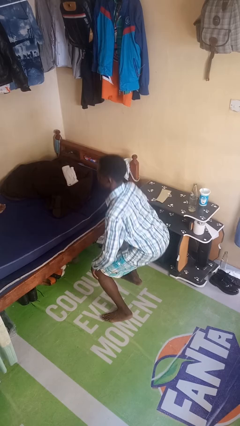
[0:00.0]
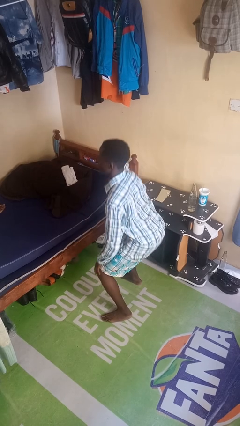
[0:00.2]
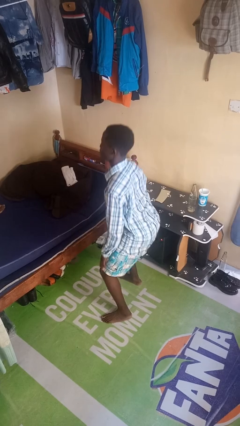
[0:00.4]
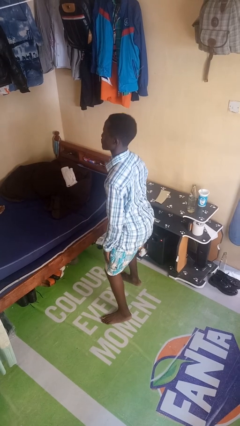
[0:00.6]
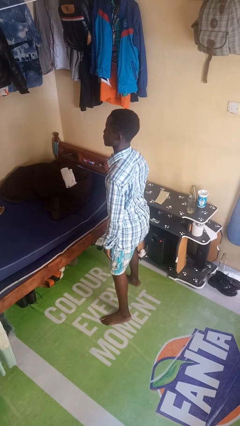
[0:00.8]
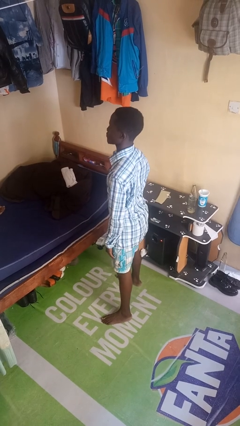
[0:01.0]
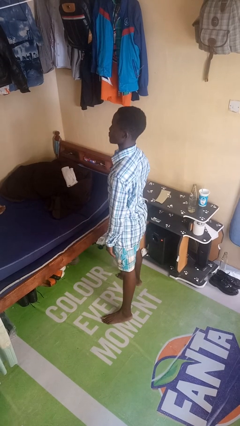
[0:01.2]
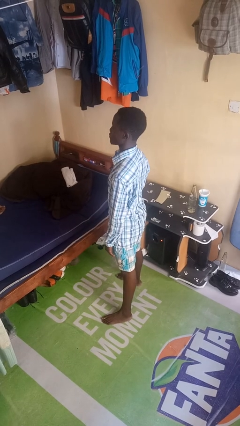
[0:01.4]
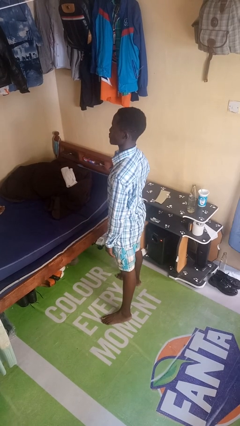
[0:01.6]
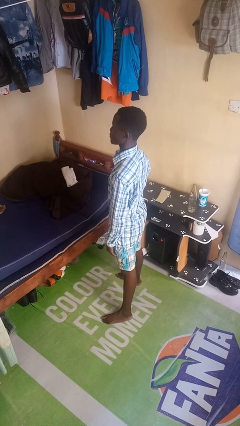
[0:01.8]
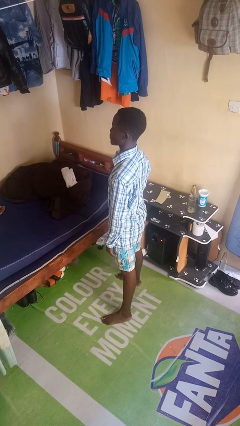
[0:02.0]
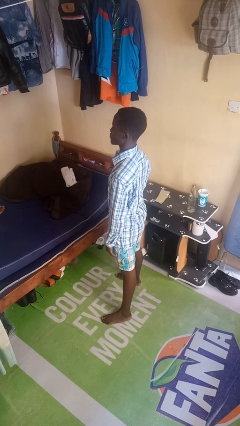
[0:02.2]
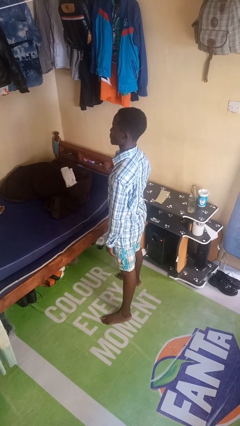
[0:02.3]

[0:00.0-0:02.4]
person stands up

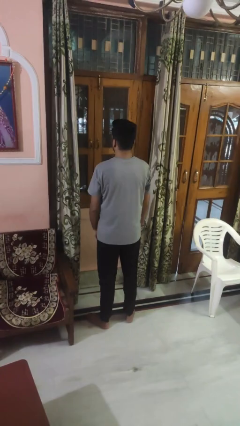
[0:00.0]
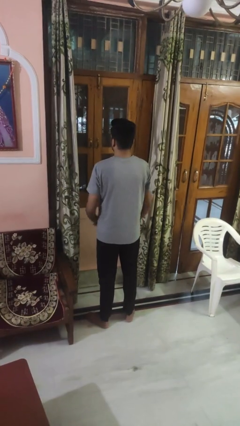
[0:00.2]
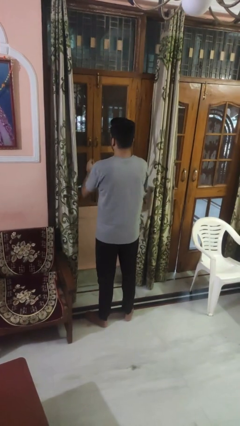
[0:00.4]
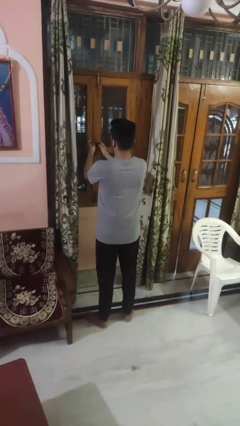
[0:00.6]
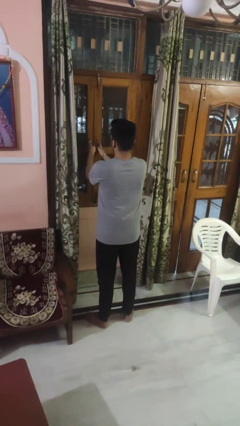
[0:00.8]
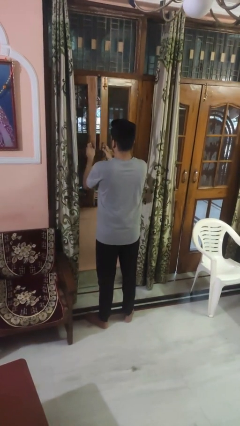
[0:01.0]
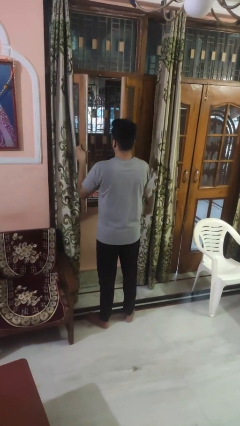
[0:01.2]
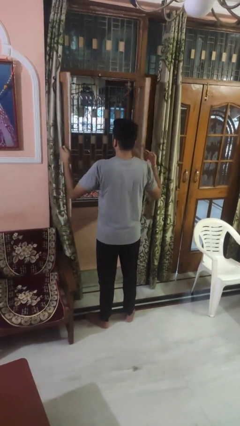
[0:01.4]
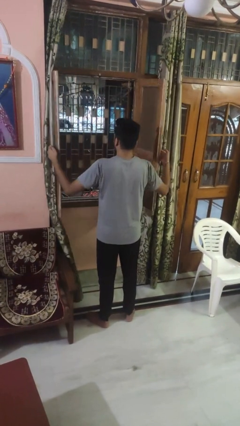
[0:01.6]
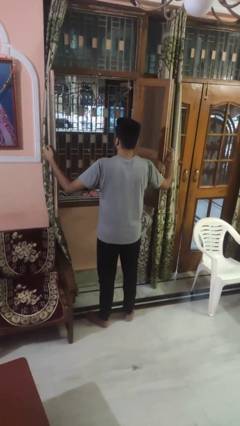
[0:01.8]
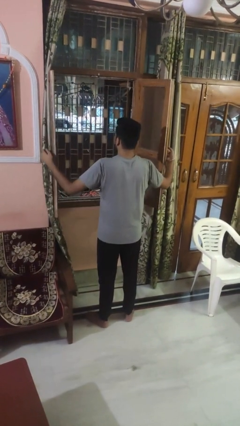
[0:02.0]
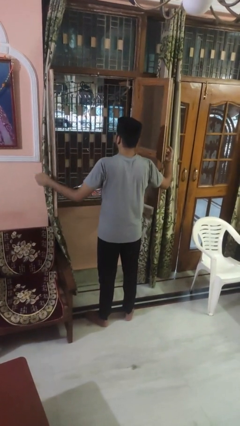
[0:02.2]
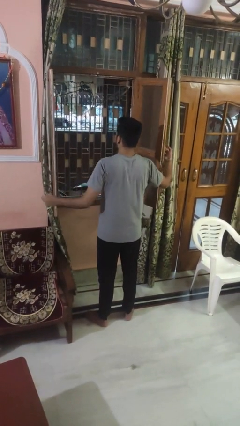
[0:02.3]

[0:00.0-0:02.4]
person opens home window

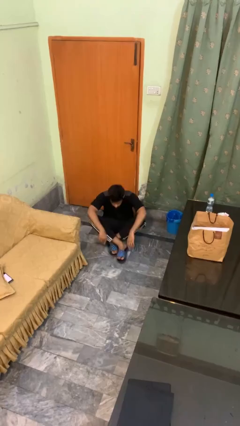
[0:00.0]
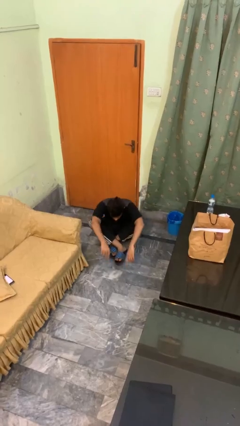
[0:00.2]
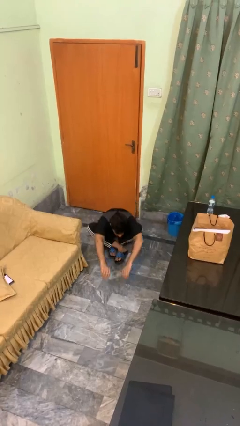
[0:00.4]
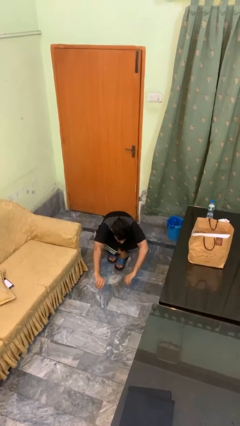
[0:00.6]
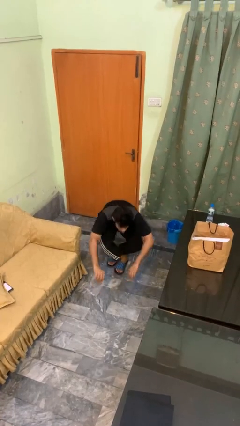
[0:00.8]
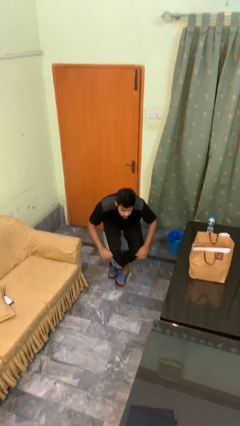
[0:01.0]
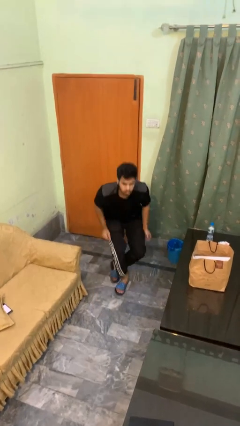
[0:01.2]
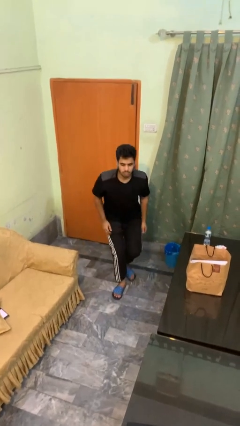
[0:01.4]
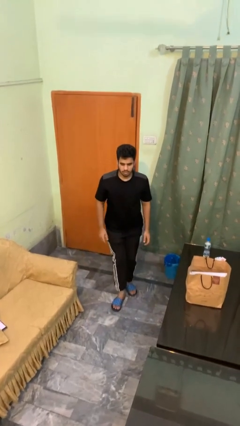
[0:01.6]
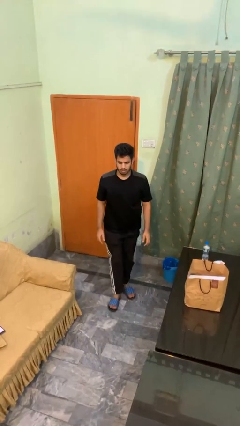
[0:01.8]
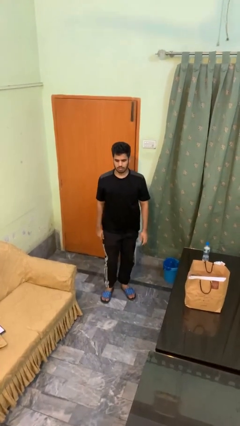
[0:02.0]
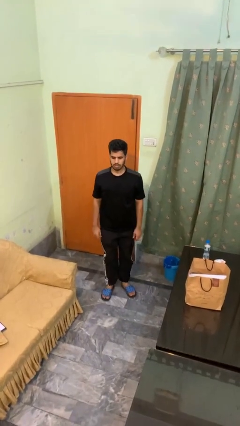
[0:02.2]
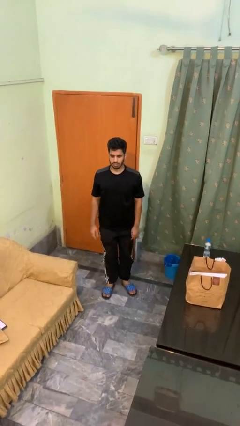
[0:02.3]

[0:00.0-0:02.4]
person stands up from floor

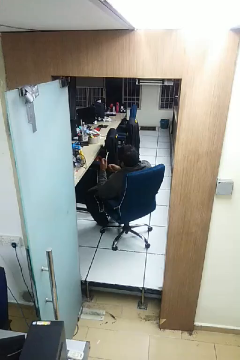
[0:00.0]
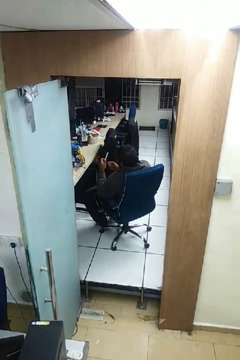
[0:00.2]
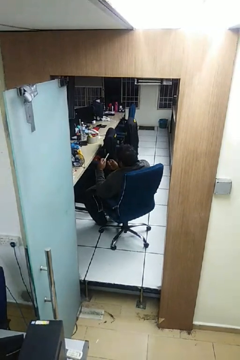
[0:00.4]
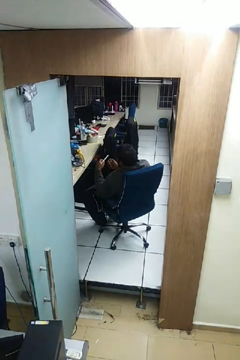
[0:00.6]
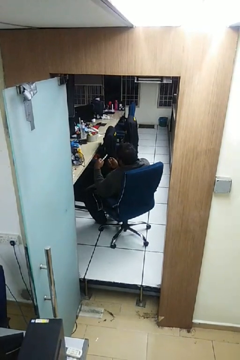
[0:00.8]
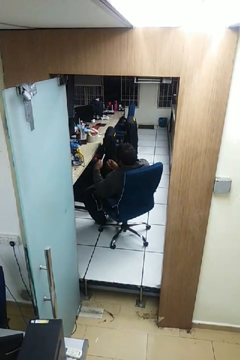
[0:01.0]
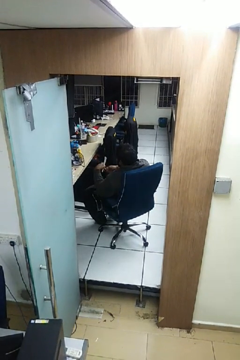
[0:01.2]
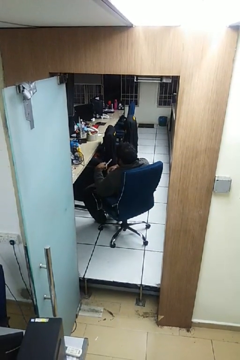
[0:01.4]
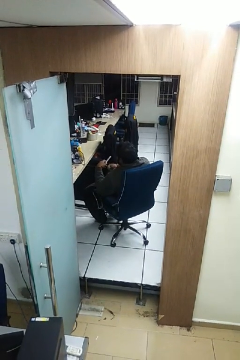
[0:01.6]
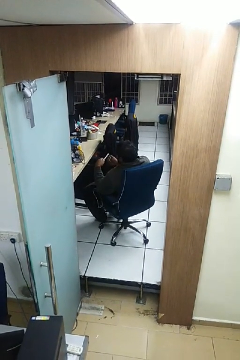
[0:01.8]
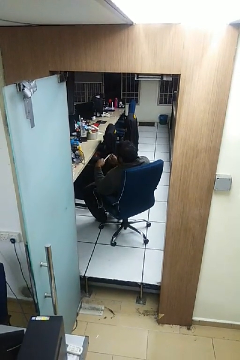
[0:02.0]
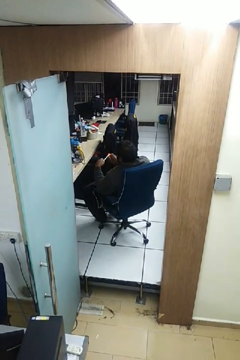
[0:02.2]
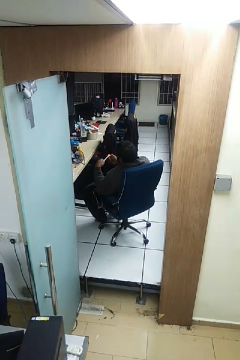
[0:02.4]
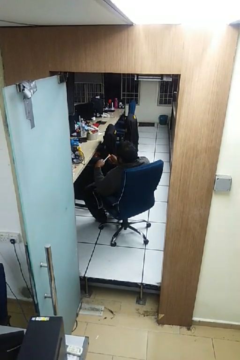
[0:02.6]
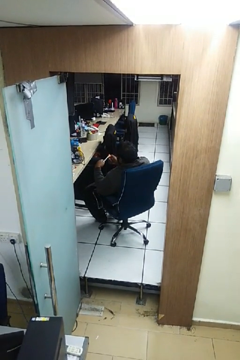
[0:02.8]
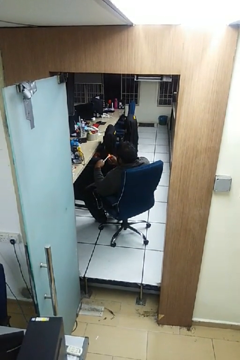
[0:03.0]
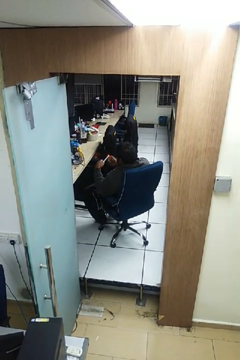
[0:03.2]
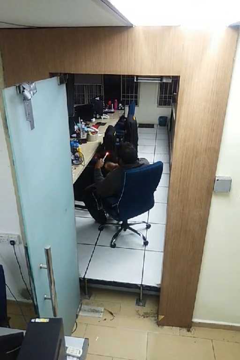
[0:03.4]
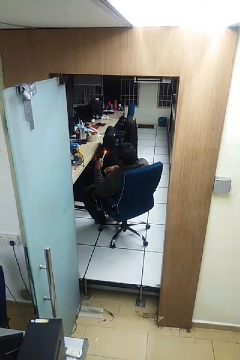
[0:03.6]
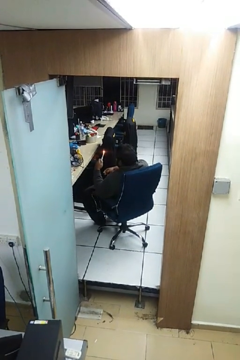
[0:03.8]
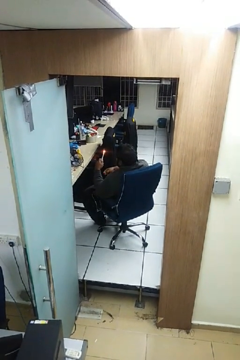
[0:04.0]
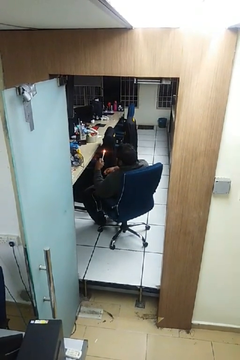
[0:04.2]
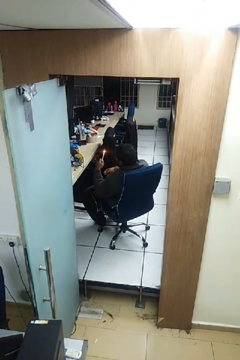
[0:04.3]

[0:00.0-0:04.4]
person lights candle

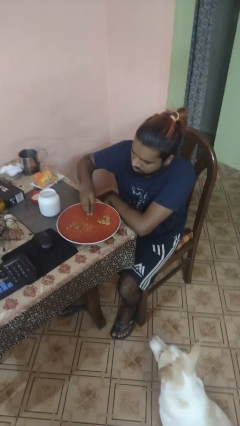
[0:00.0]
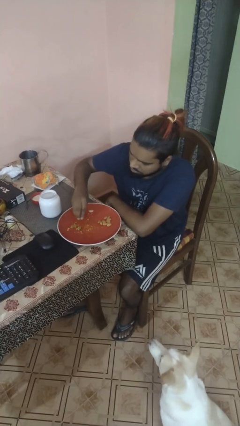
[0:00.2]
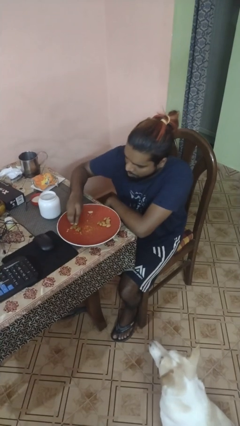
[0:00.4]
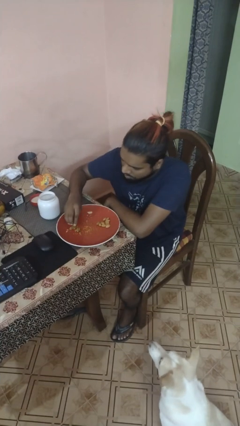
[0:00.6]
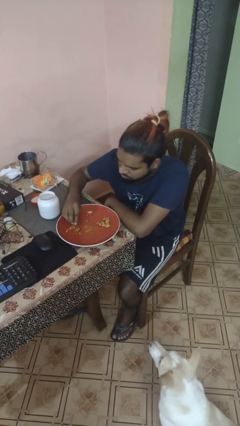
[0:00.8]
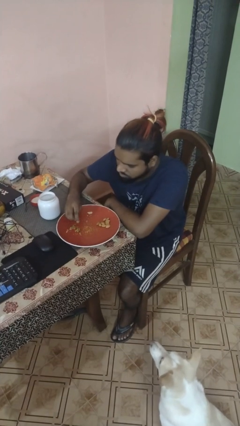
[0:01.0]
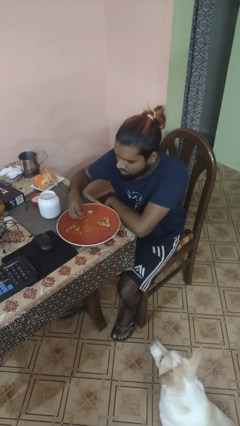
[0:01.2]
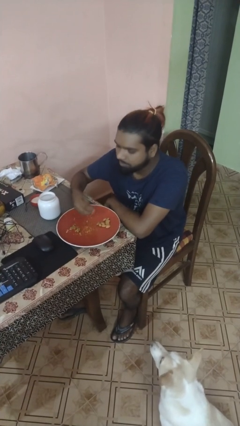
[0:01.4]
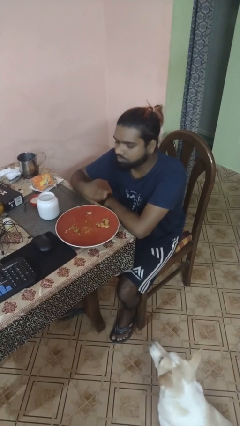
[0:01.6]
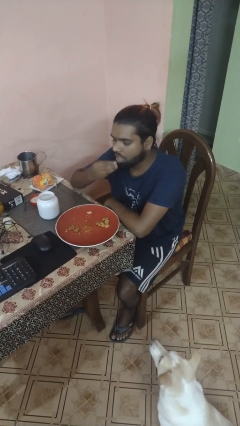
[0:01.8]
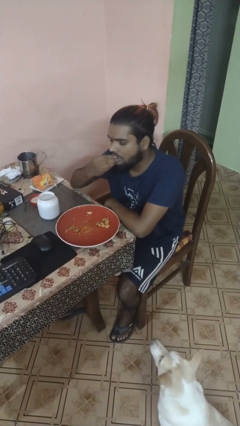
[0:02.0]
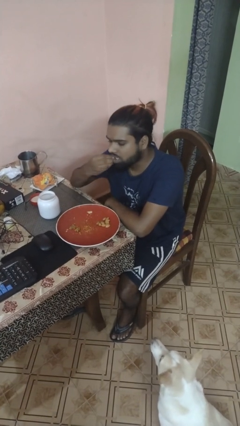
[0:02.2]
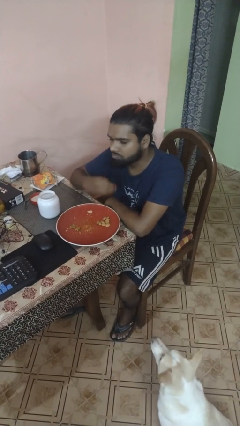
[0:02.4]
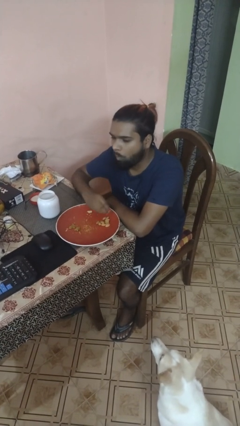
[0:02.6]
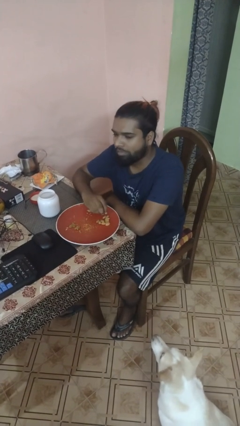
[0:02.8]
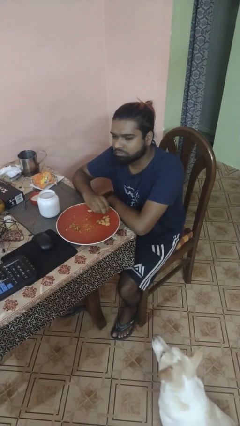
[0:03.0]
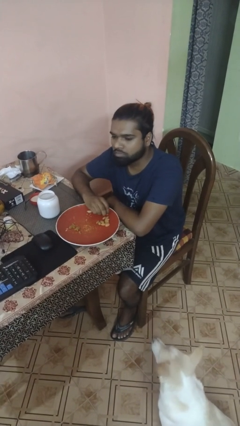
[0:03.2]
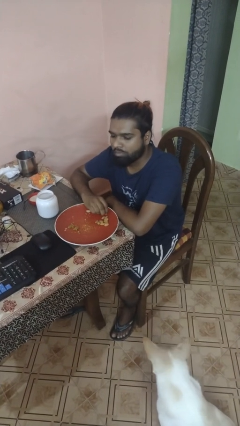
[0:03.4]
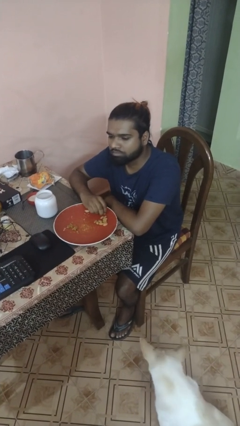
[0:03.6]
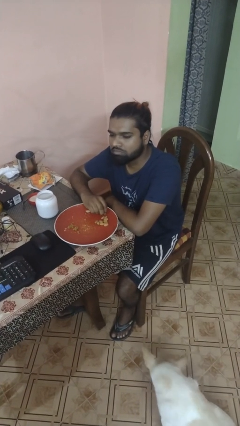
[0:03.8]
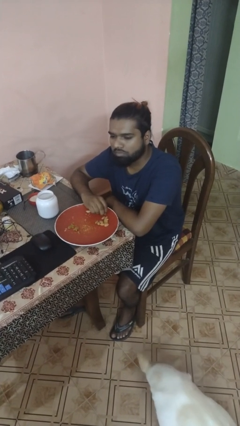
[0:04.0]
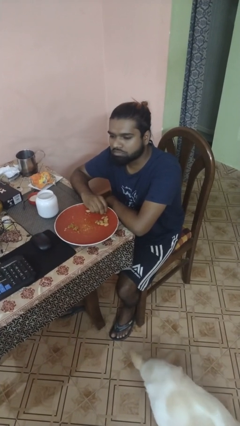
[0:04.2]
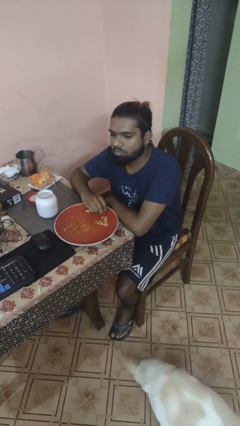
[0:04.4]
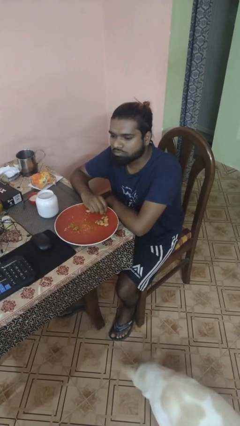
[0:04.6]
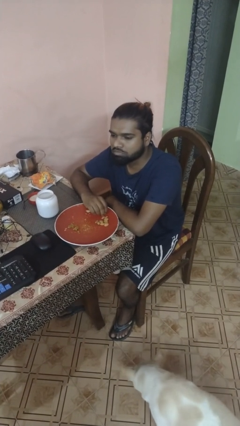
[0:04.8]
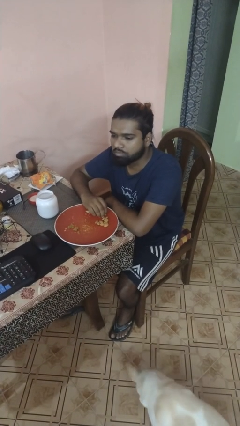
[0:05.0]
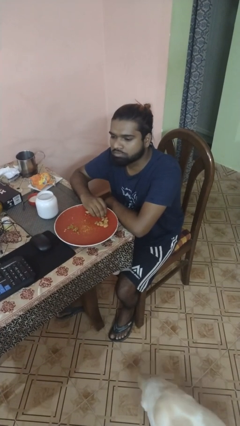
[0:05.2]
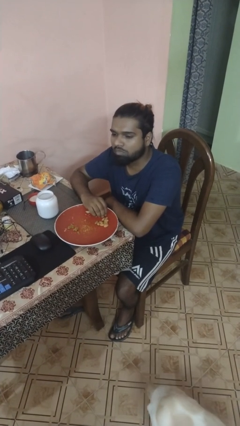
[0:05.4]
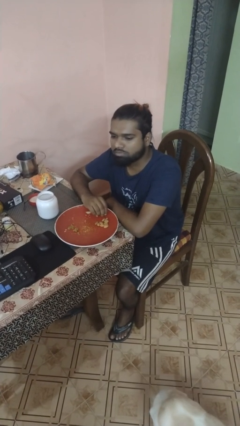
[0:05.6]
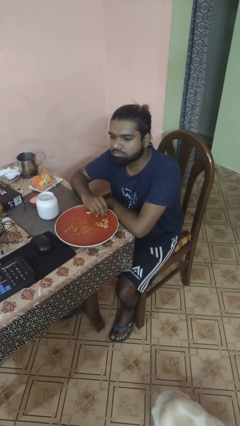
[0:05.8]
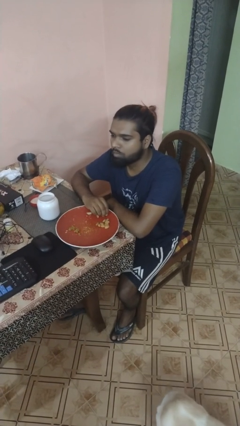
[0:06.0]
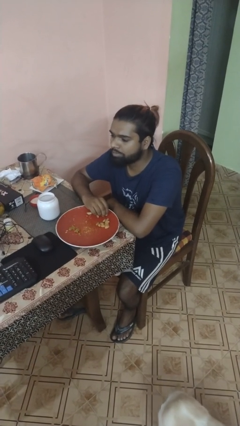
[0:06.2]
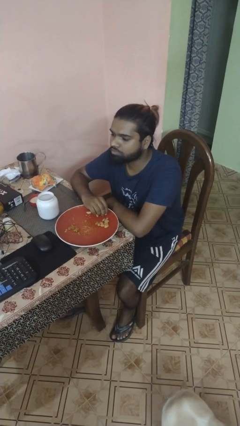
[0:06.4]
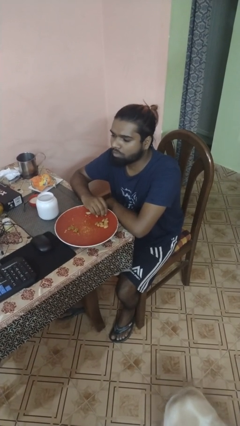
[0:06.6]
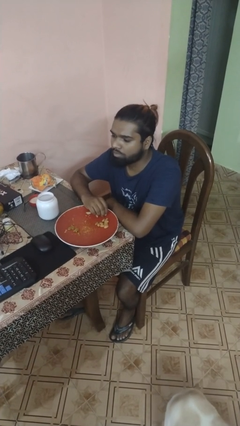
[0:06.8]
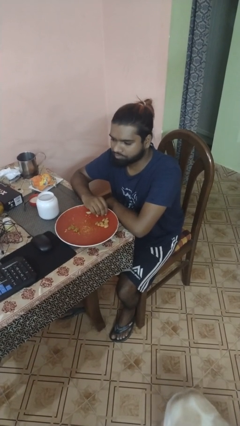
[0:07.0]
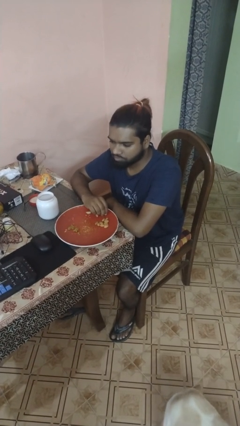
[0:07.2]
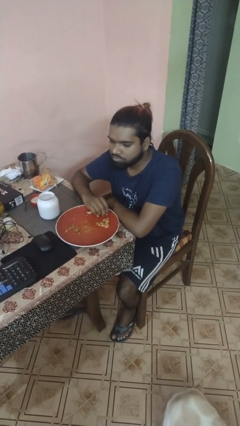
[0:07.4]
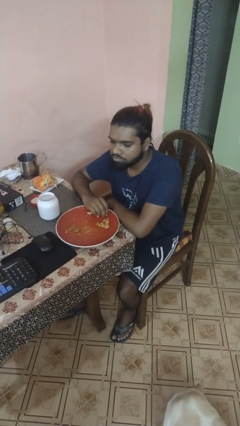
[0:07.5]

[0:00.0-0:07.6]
person eats with hands
